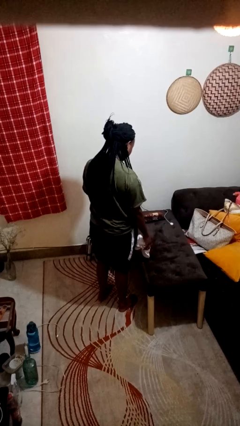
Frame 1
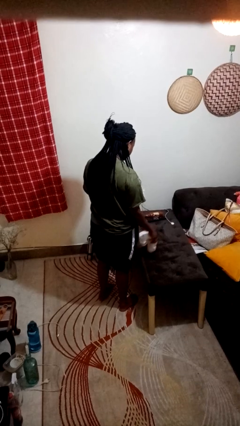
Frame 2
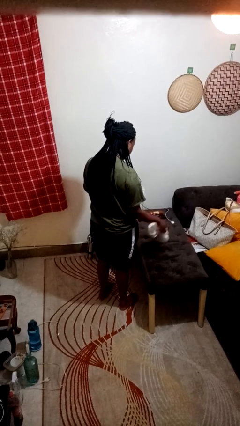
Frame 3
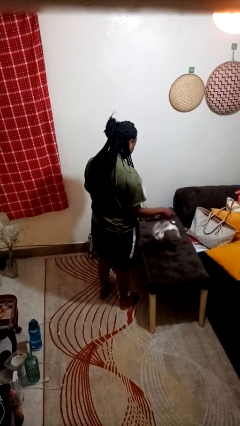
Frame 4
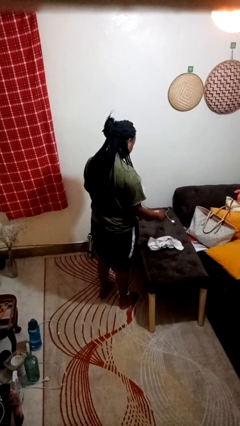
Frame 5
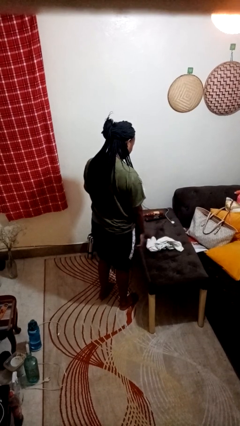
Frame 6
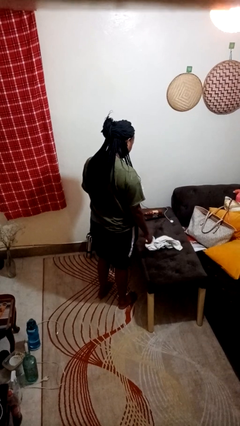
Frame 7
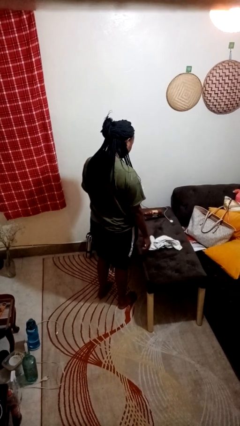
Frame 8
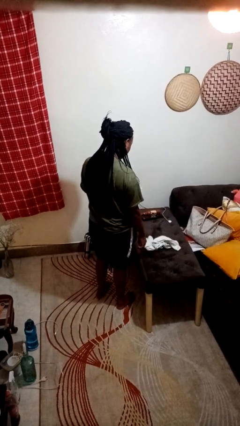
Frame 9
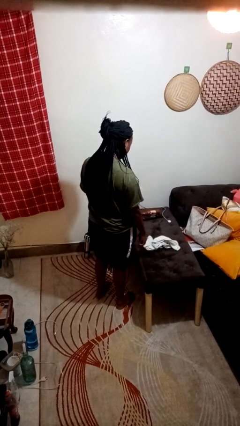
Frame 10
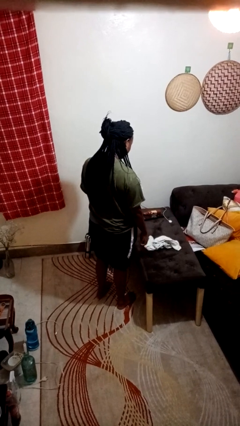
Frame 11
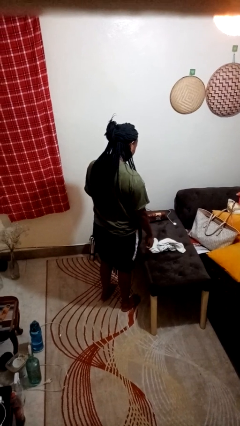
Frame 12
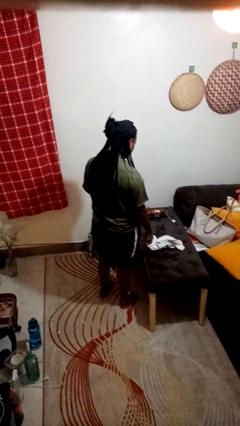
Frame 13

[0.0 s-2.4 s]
person throws object on table

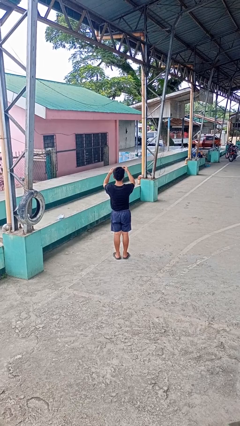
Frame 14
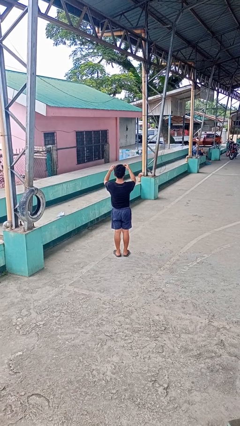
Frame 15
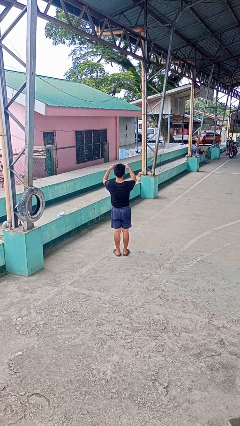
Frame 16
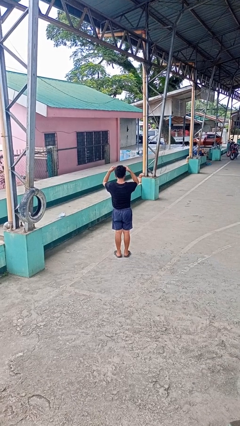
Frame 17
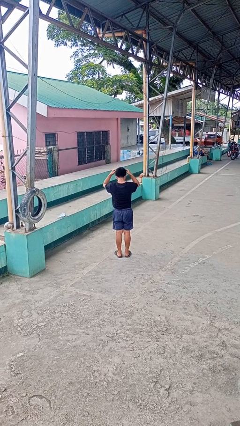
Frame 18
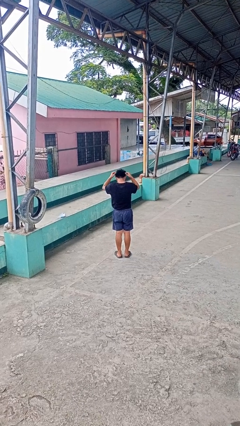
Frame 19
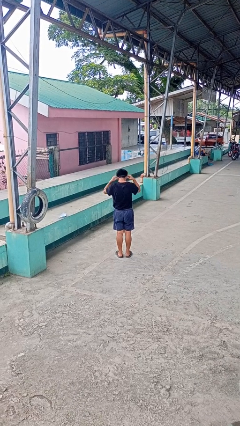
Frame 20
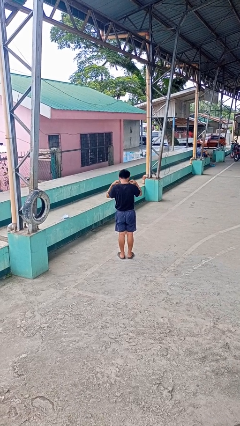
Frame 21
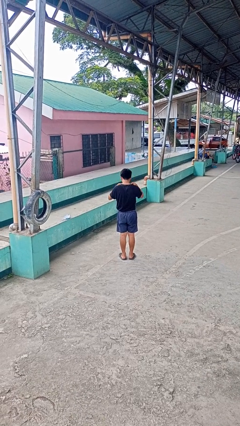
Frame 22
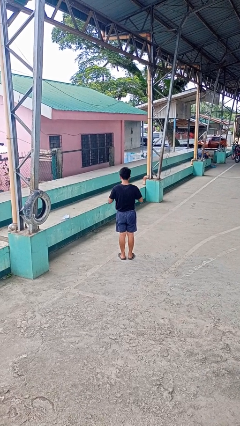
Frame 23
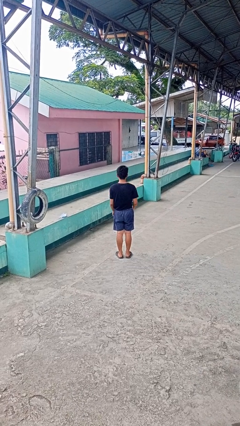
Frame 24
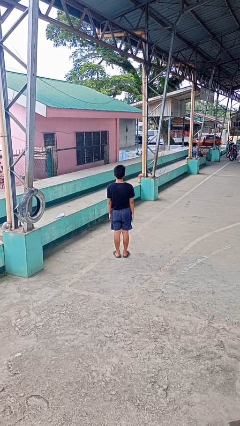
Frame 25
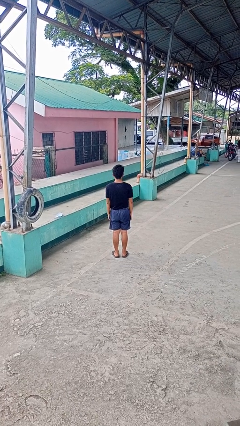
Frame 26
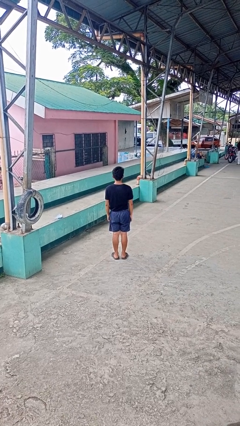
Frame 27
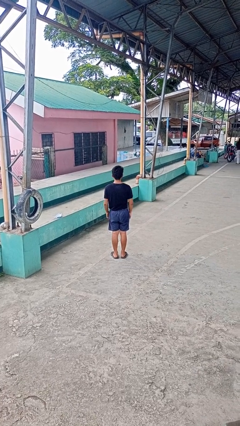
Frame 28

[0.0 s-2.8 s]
person puts on necklace

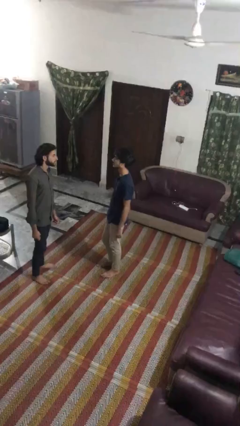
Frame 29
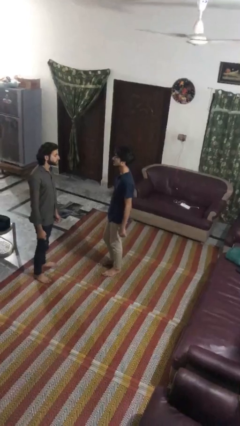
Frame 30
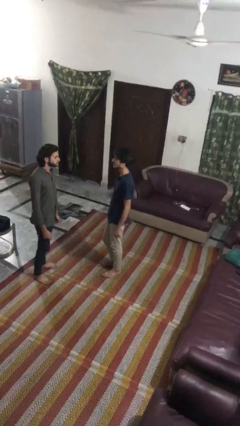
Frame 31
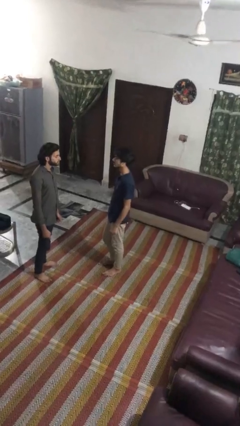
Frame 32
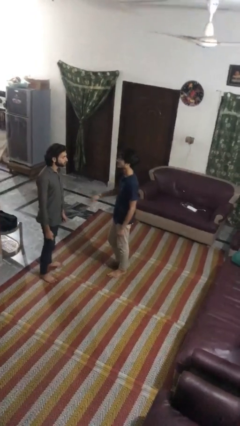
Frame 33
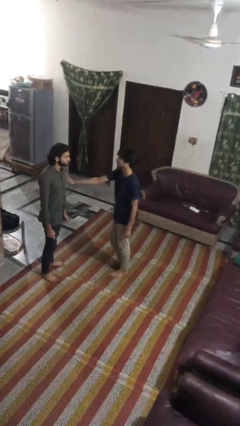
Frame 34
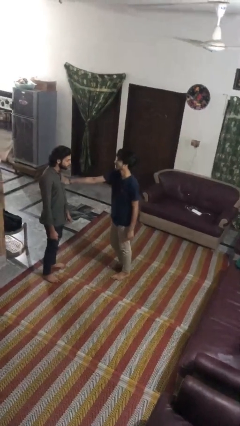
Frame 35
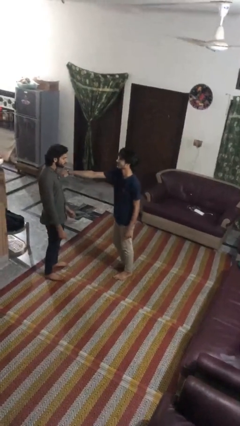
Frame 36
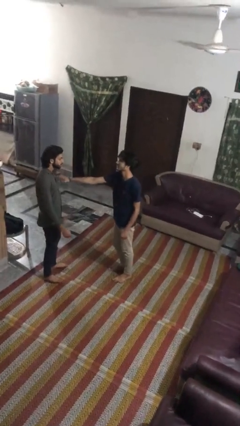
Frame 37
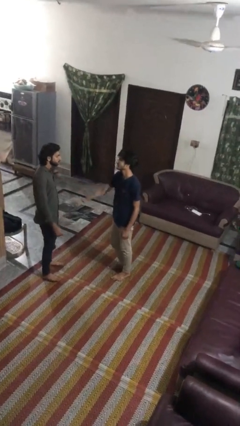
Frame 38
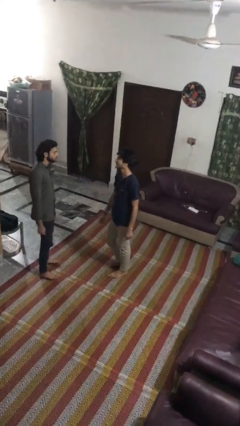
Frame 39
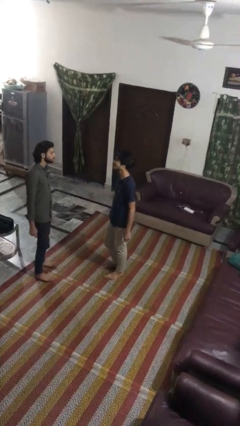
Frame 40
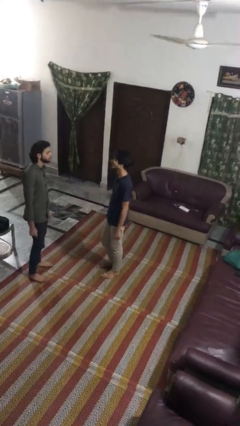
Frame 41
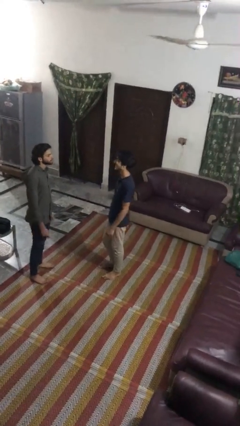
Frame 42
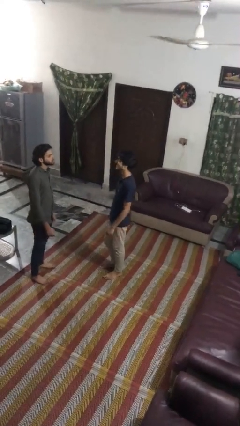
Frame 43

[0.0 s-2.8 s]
person shoves person

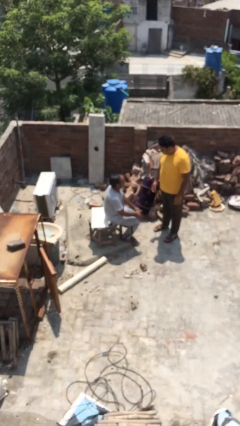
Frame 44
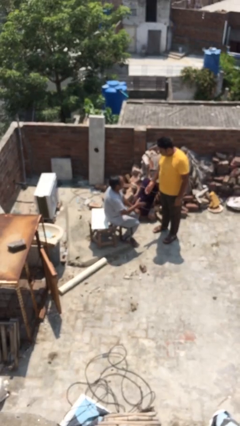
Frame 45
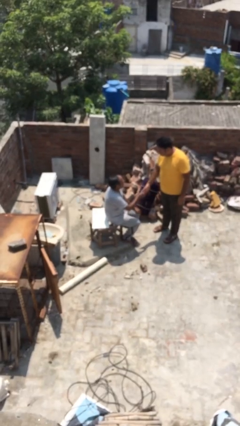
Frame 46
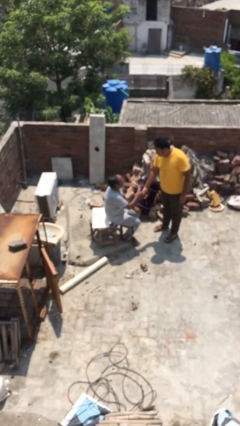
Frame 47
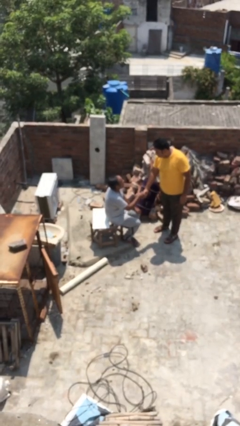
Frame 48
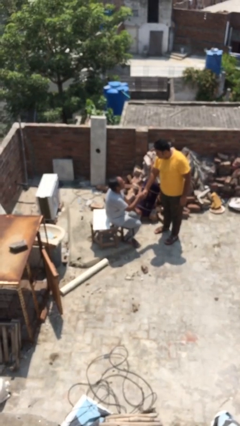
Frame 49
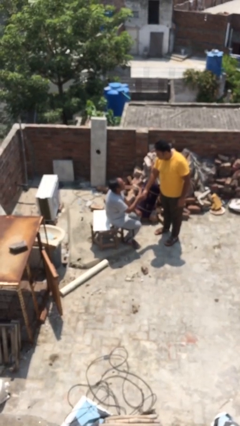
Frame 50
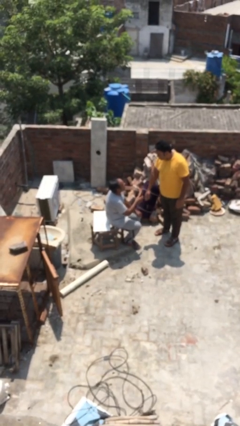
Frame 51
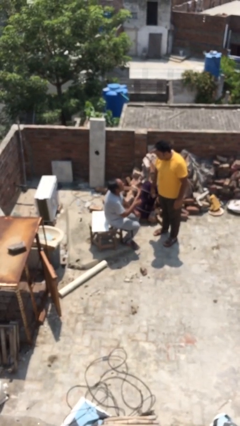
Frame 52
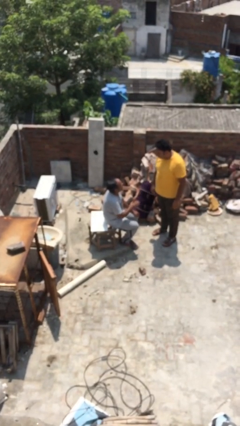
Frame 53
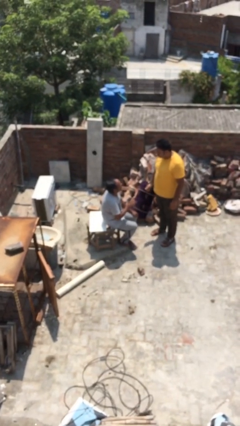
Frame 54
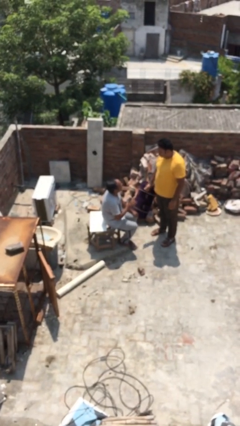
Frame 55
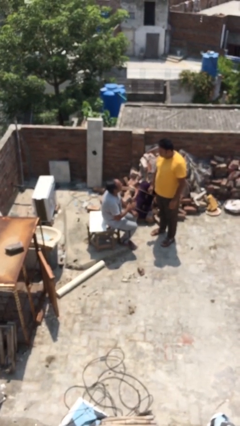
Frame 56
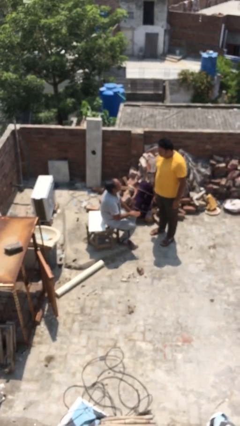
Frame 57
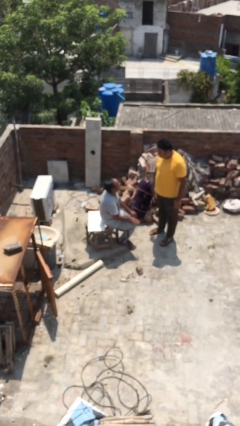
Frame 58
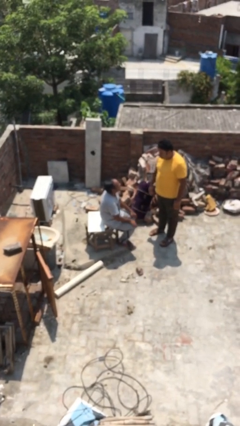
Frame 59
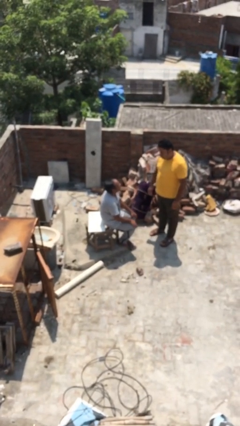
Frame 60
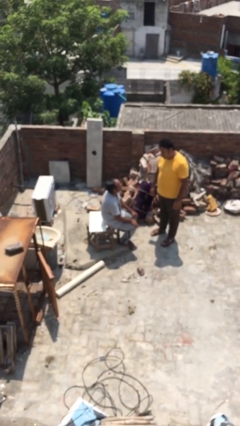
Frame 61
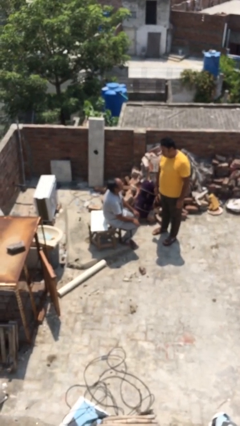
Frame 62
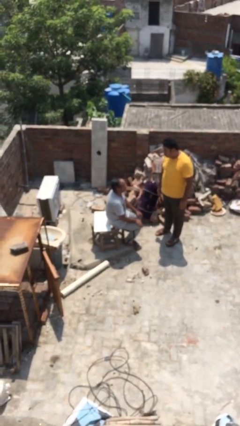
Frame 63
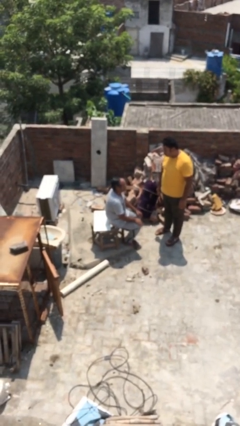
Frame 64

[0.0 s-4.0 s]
person shakes hand

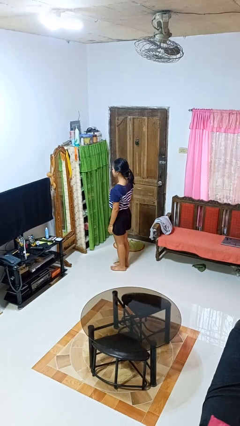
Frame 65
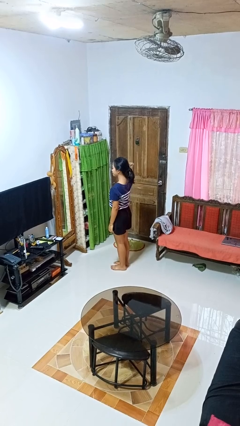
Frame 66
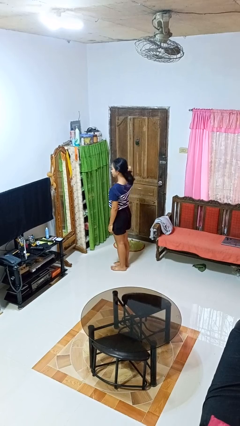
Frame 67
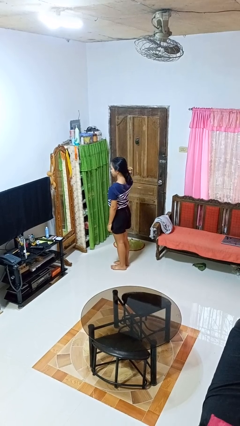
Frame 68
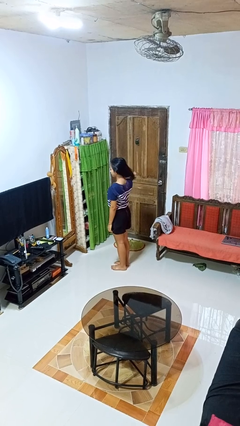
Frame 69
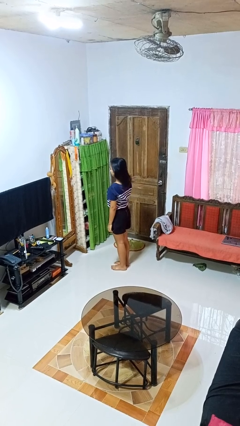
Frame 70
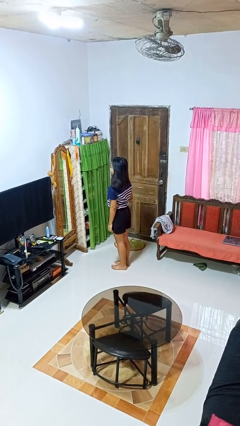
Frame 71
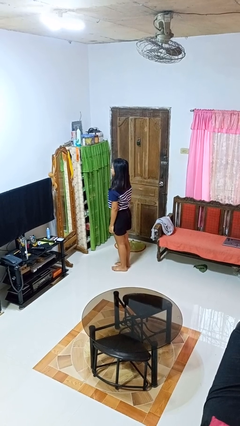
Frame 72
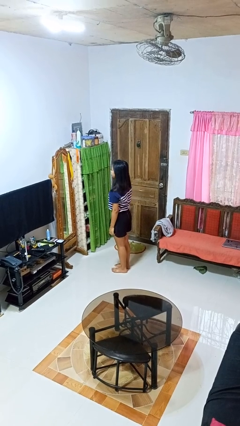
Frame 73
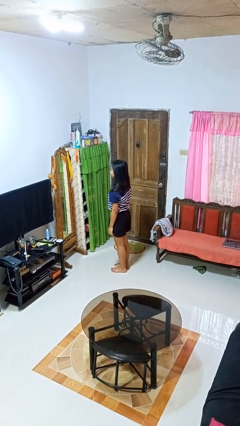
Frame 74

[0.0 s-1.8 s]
person takes off hairtie

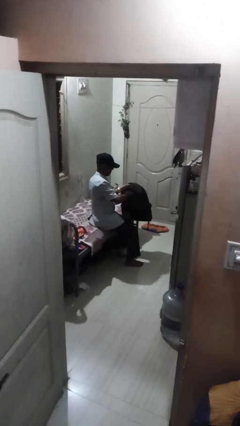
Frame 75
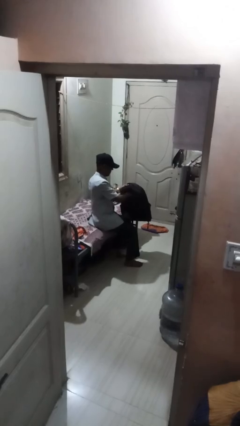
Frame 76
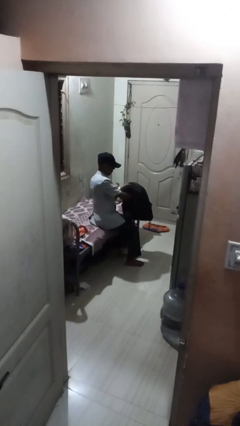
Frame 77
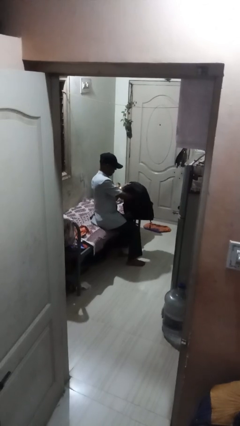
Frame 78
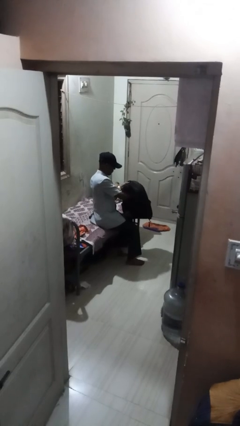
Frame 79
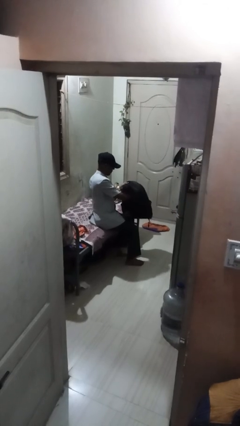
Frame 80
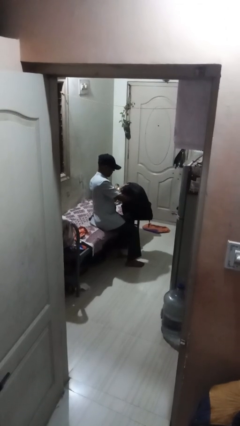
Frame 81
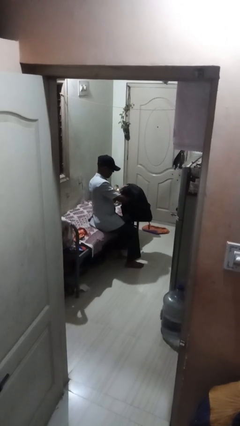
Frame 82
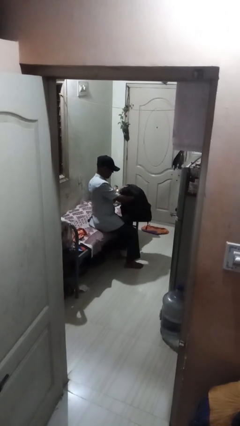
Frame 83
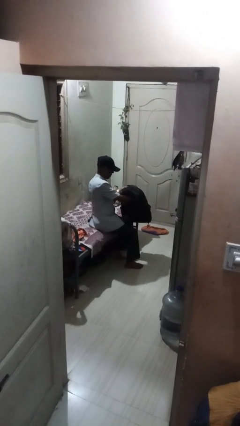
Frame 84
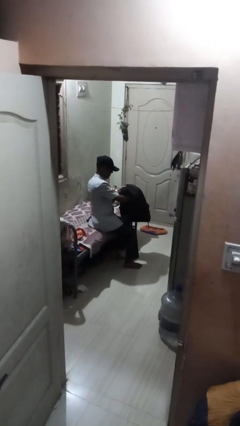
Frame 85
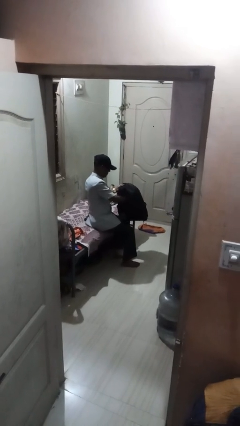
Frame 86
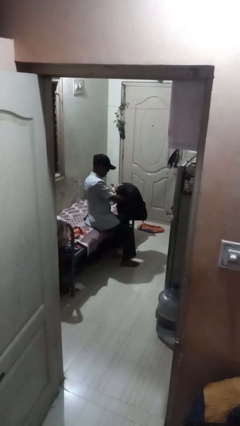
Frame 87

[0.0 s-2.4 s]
person searches in backpack

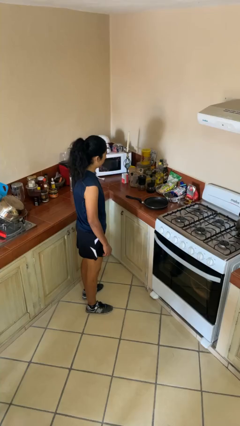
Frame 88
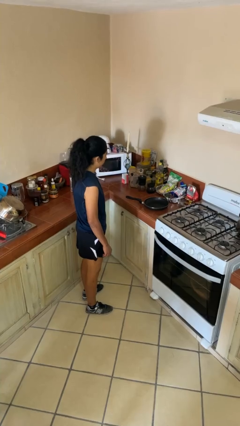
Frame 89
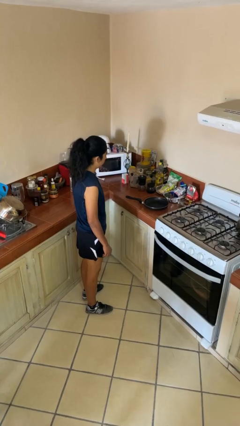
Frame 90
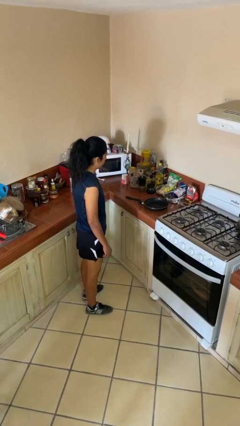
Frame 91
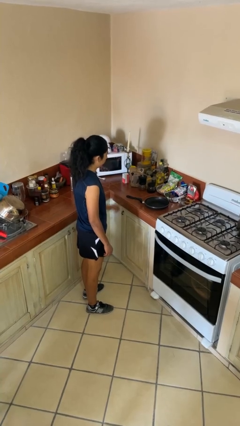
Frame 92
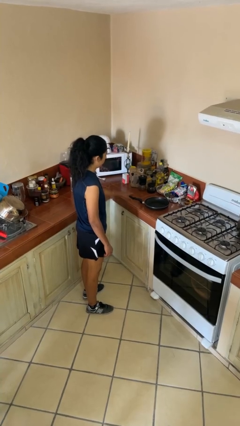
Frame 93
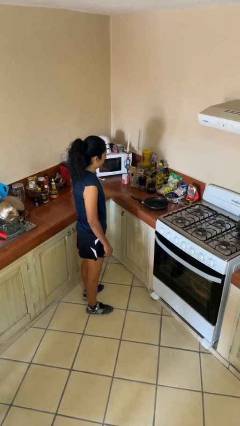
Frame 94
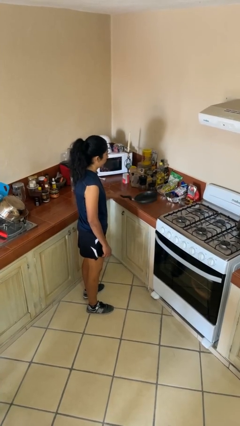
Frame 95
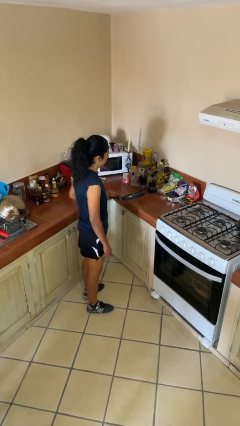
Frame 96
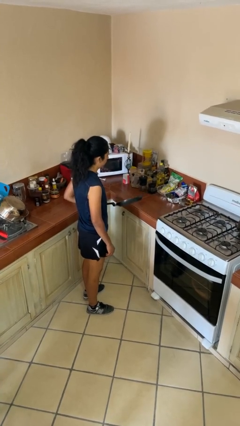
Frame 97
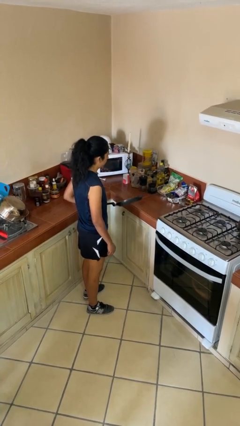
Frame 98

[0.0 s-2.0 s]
person picks up object from countertop
